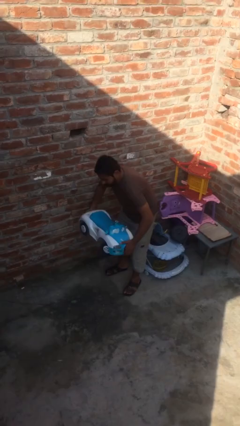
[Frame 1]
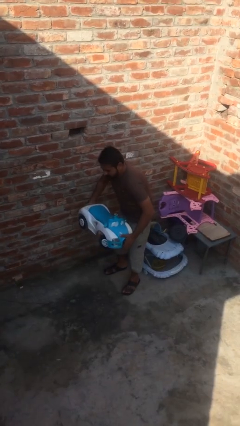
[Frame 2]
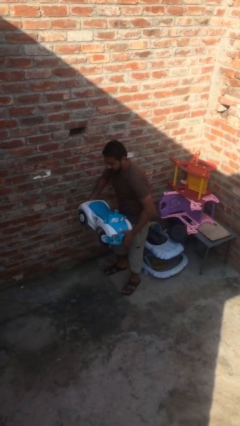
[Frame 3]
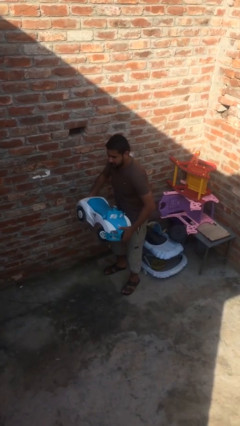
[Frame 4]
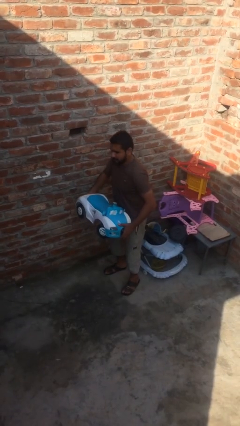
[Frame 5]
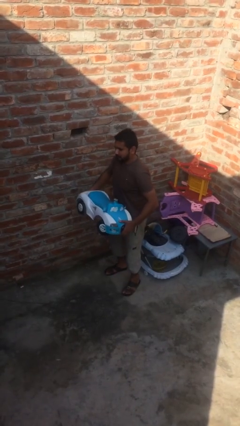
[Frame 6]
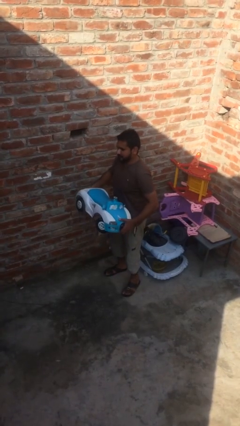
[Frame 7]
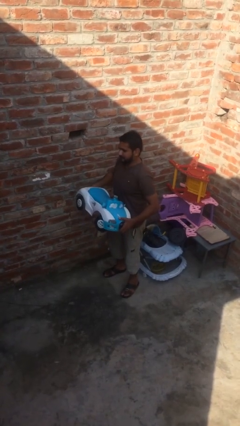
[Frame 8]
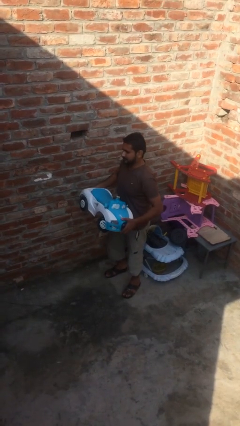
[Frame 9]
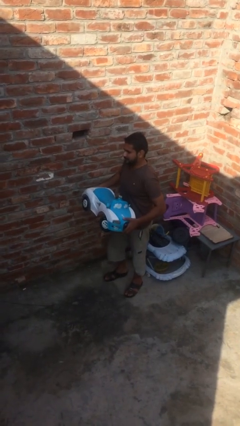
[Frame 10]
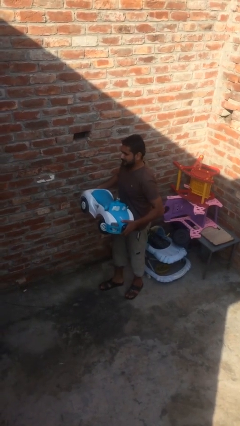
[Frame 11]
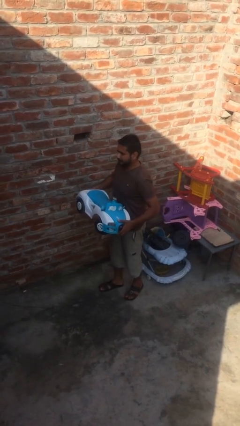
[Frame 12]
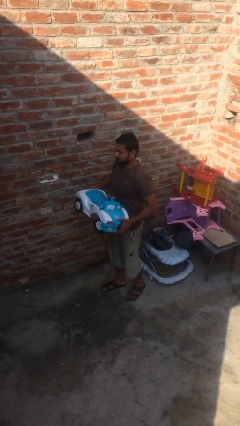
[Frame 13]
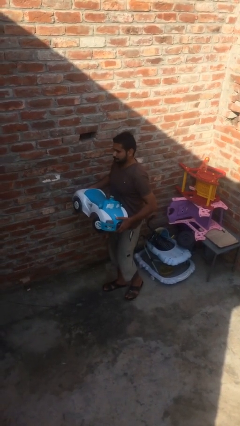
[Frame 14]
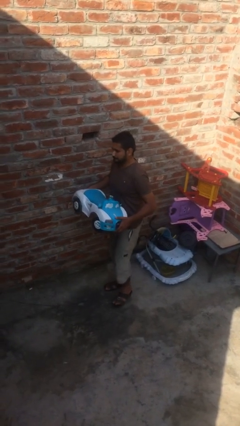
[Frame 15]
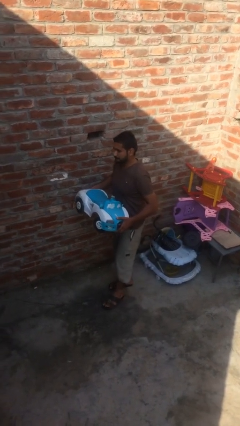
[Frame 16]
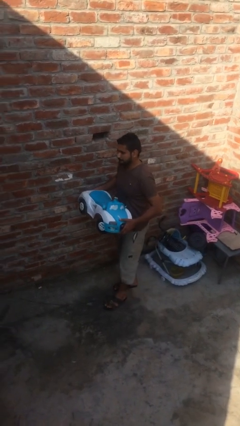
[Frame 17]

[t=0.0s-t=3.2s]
person carries heavy object

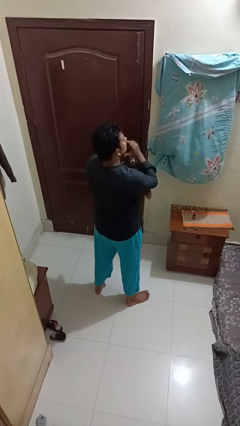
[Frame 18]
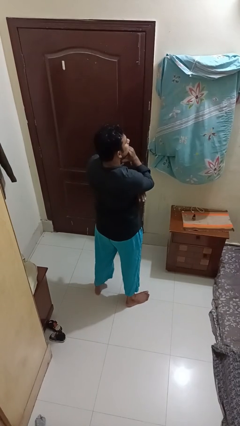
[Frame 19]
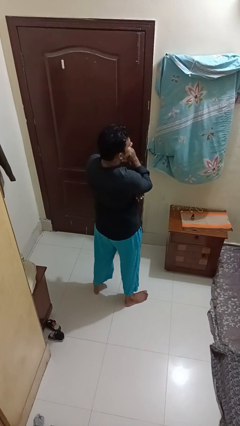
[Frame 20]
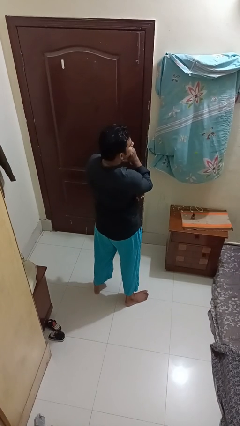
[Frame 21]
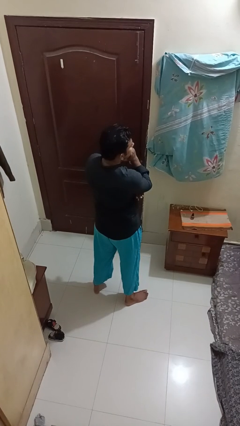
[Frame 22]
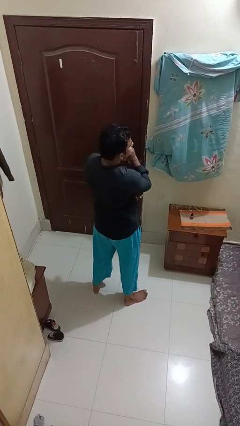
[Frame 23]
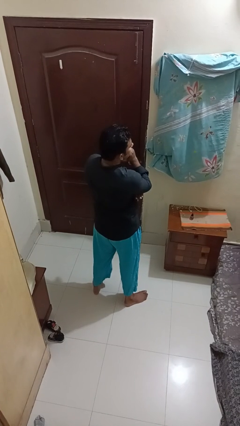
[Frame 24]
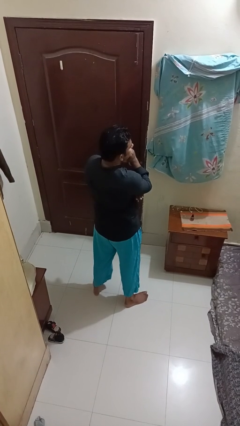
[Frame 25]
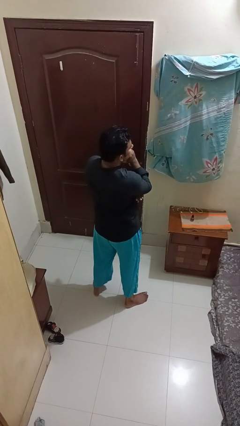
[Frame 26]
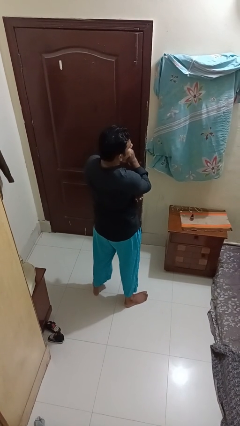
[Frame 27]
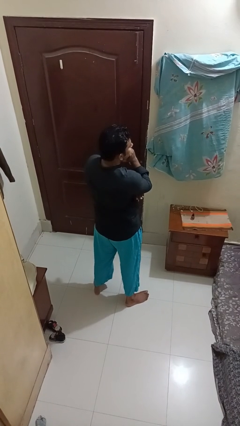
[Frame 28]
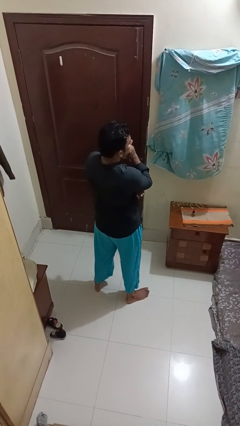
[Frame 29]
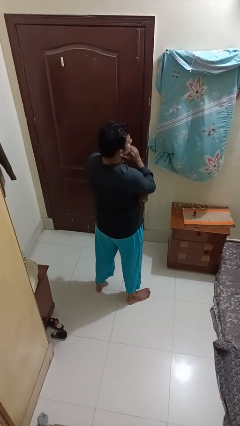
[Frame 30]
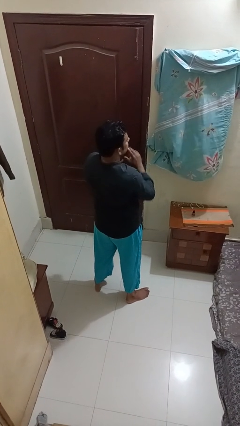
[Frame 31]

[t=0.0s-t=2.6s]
person strokes chin

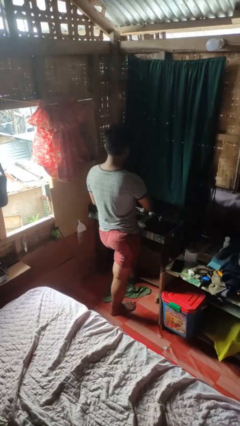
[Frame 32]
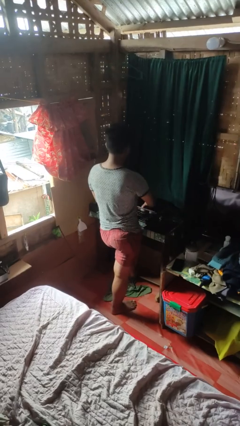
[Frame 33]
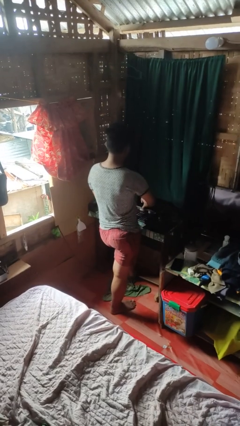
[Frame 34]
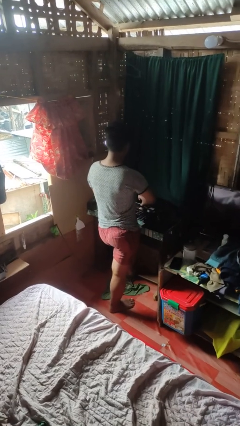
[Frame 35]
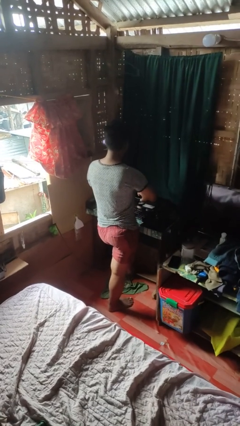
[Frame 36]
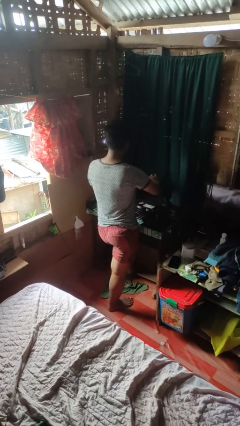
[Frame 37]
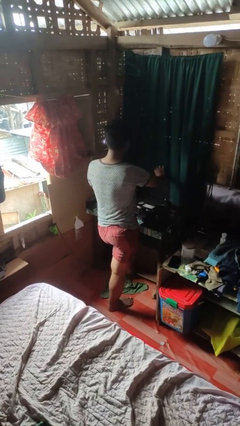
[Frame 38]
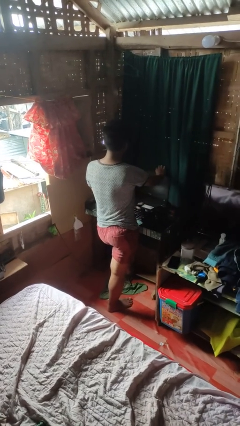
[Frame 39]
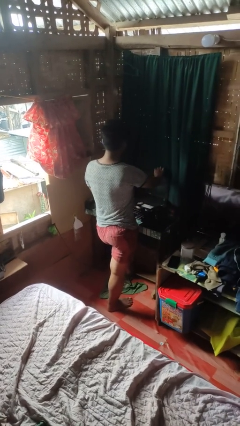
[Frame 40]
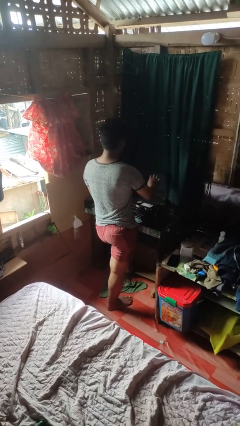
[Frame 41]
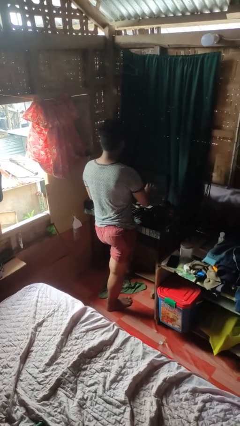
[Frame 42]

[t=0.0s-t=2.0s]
person opens laptop

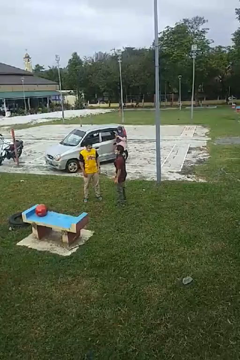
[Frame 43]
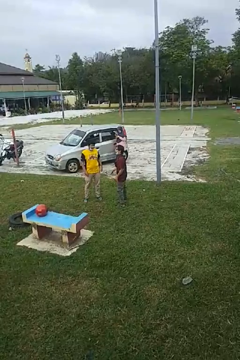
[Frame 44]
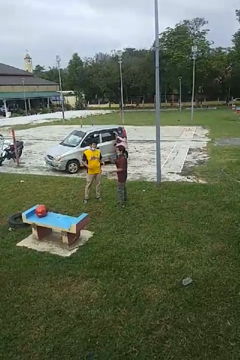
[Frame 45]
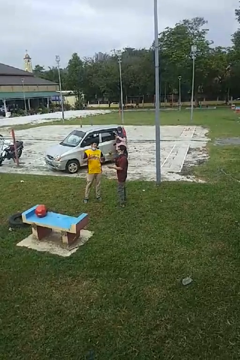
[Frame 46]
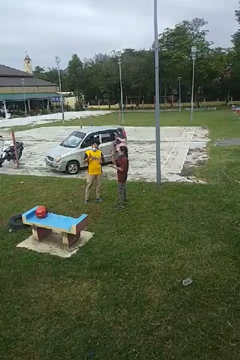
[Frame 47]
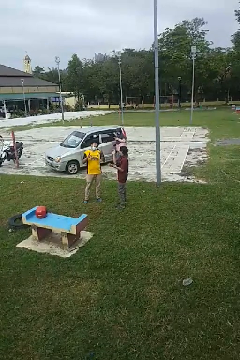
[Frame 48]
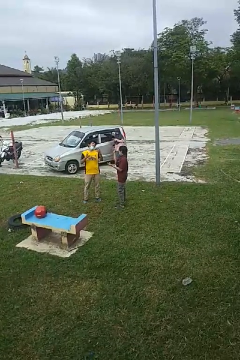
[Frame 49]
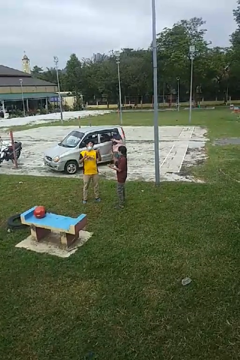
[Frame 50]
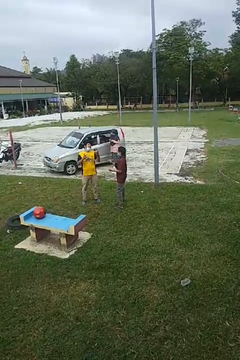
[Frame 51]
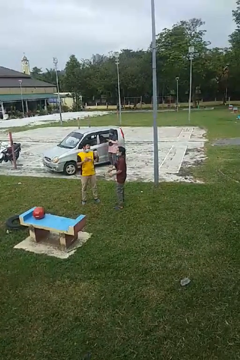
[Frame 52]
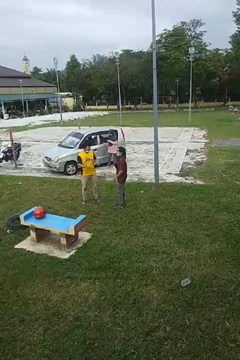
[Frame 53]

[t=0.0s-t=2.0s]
person talks to person

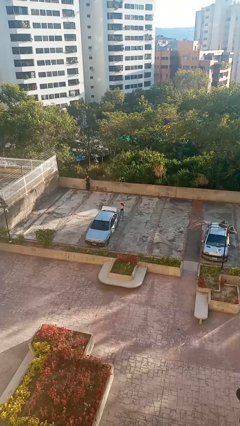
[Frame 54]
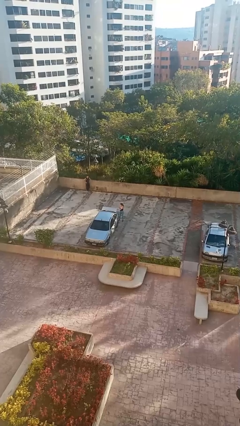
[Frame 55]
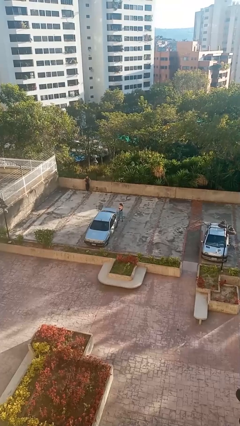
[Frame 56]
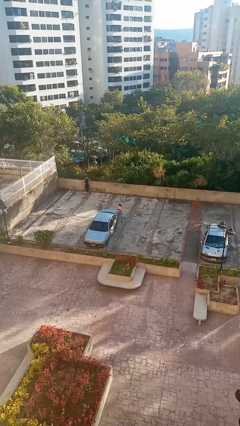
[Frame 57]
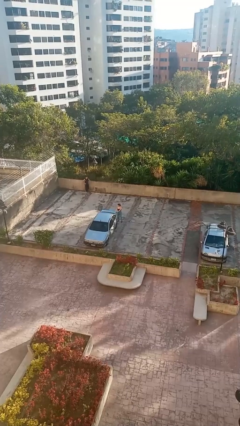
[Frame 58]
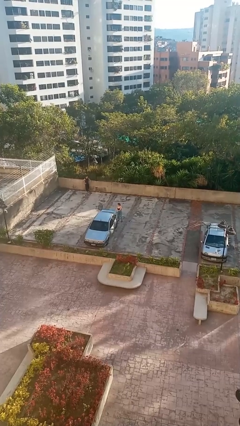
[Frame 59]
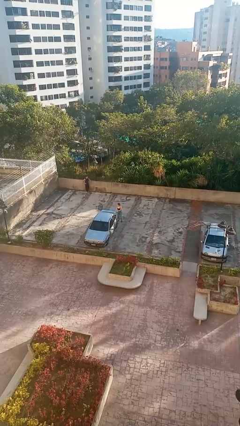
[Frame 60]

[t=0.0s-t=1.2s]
person closes car trunk

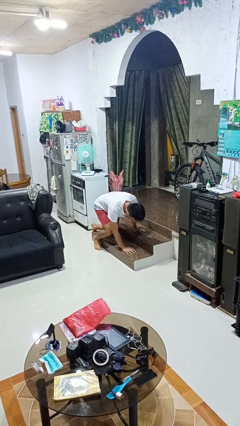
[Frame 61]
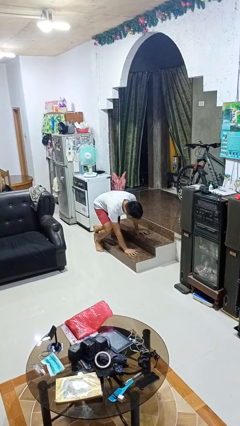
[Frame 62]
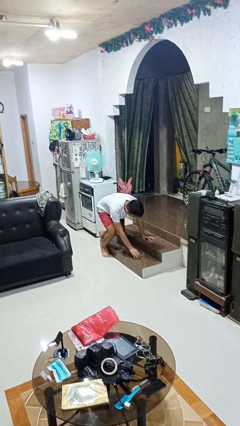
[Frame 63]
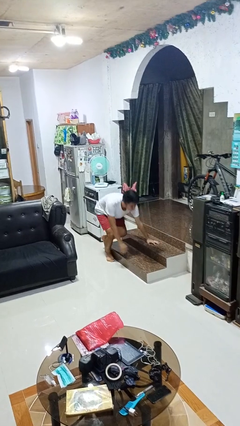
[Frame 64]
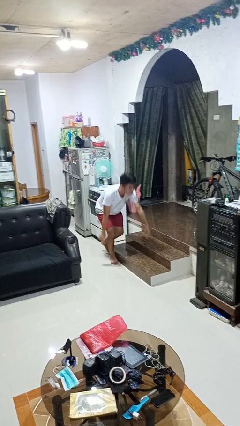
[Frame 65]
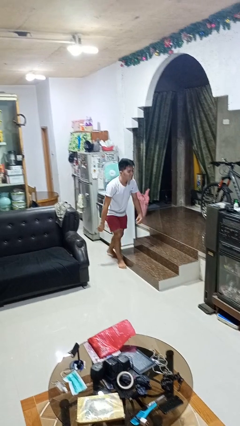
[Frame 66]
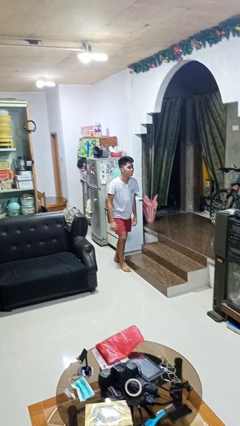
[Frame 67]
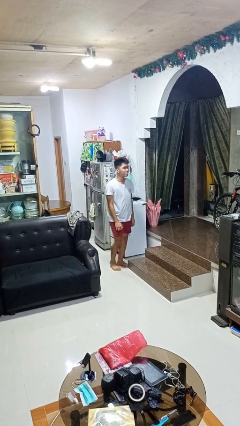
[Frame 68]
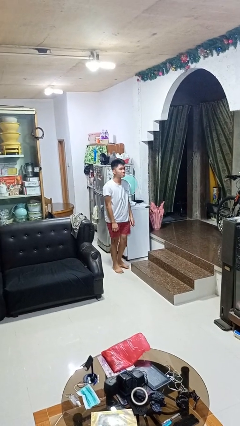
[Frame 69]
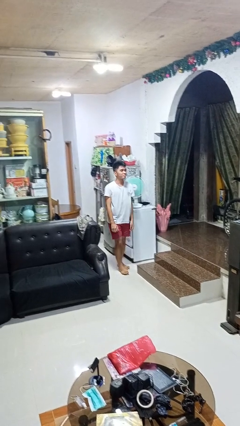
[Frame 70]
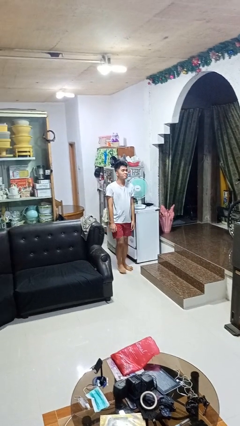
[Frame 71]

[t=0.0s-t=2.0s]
person stands up from floor

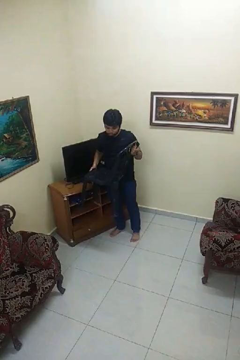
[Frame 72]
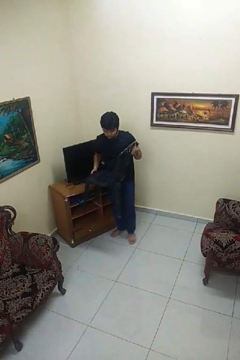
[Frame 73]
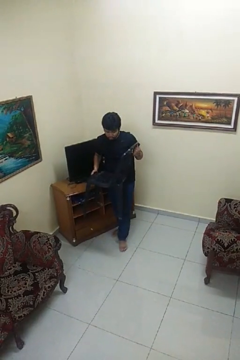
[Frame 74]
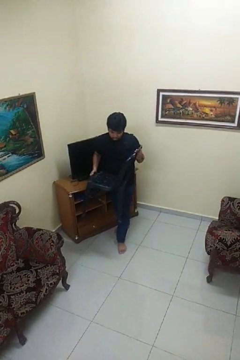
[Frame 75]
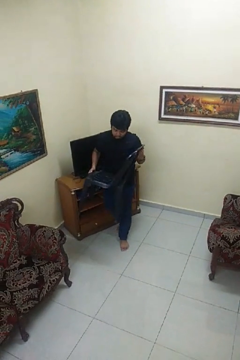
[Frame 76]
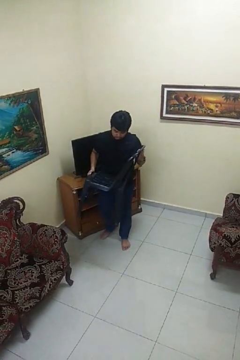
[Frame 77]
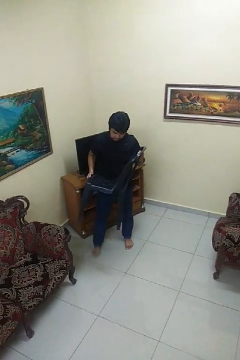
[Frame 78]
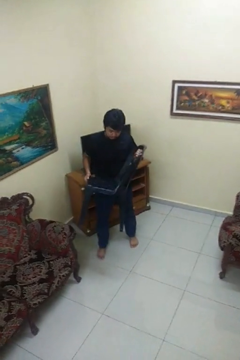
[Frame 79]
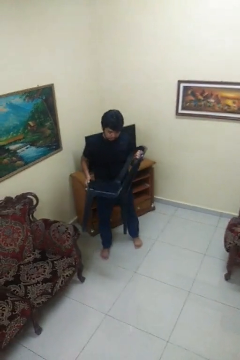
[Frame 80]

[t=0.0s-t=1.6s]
person carries furniture

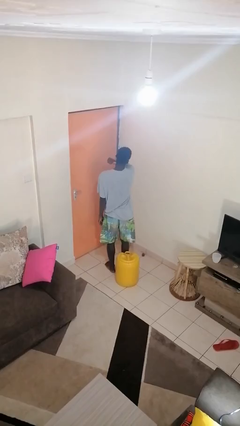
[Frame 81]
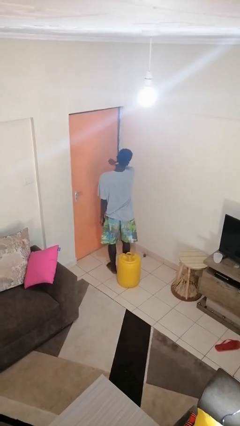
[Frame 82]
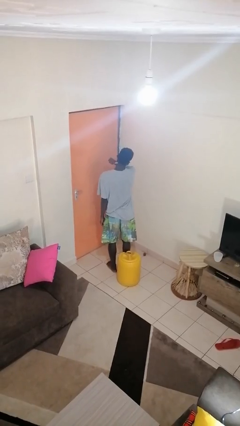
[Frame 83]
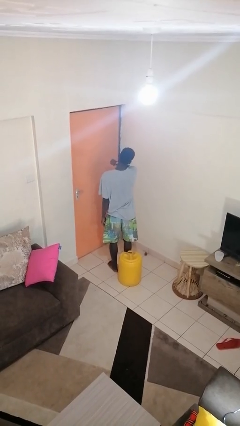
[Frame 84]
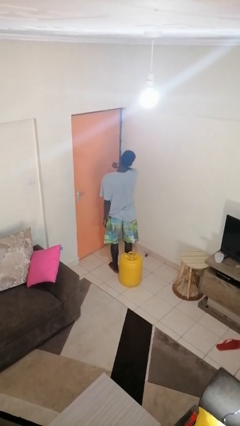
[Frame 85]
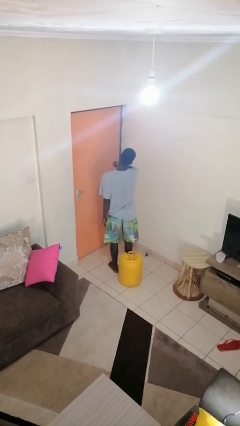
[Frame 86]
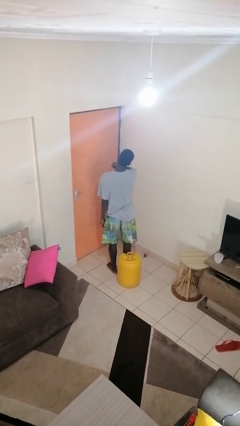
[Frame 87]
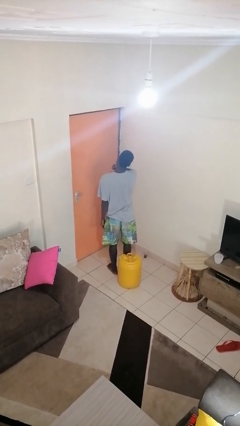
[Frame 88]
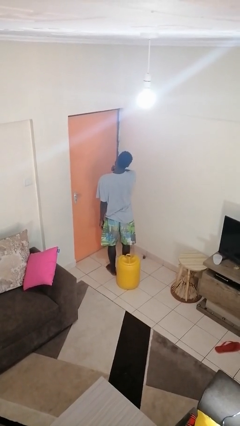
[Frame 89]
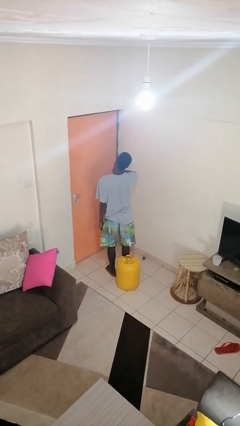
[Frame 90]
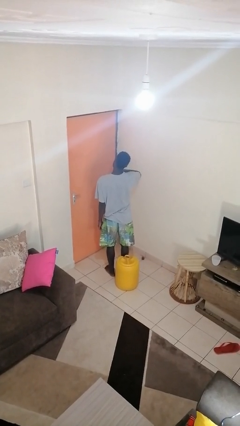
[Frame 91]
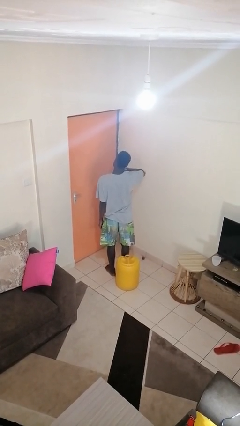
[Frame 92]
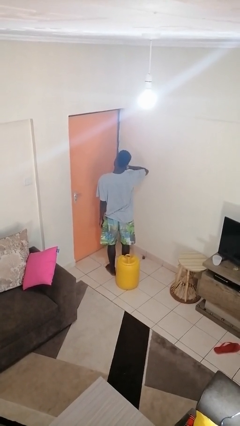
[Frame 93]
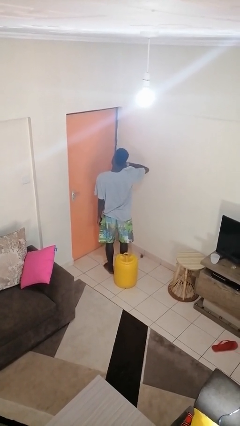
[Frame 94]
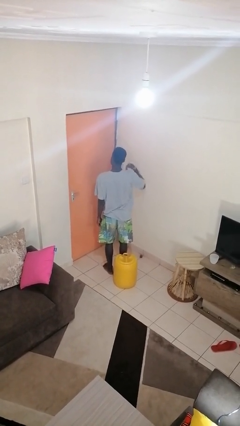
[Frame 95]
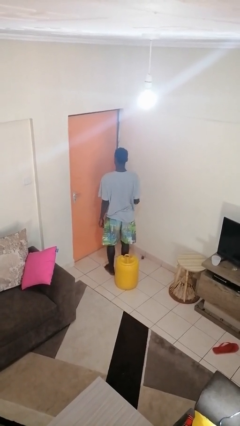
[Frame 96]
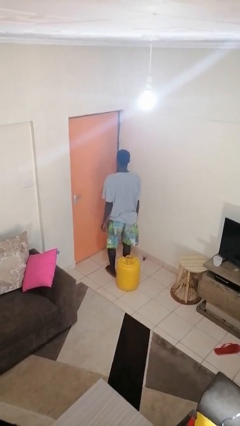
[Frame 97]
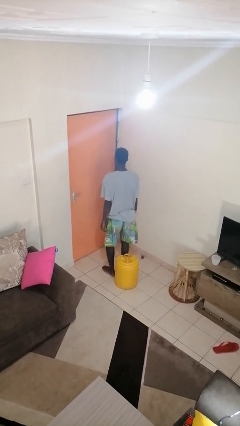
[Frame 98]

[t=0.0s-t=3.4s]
person gestures cut
